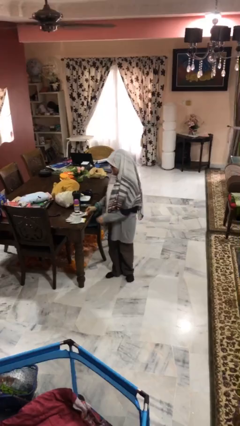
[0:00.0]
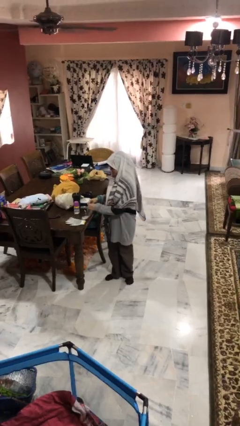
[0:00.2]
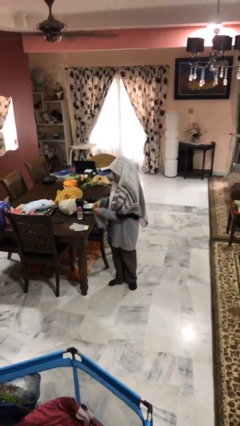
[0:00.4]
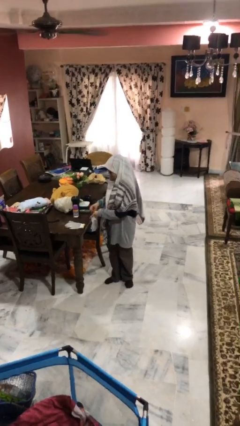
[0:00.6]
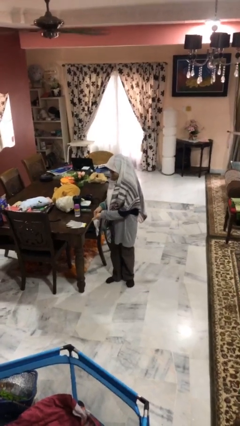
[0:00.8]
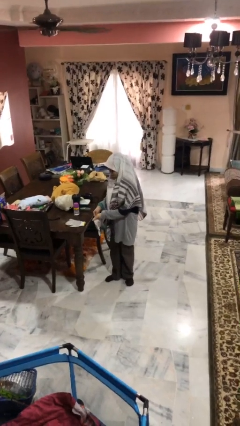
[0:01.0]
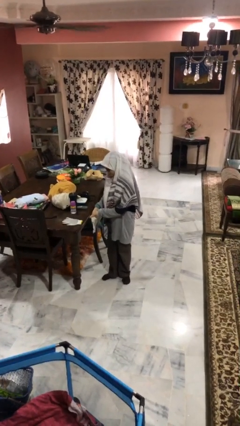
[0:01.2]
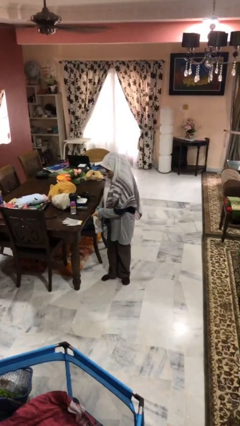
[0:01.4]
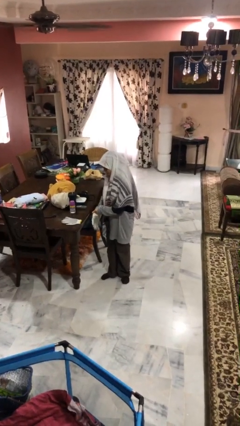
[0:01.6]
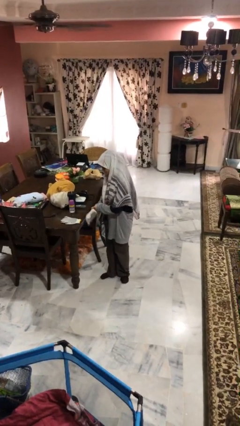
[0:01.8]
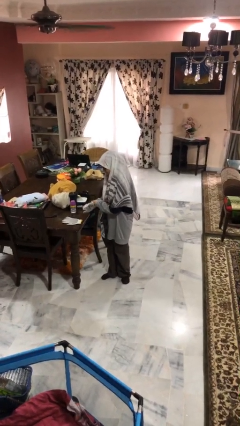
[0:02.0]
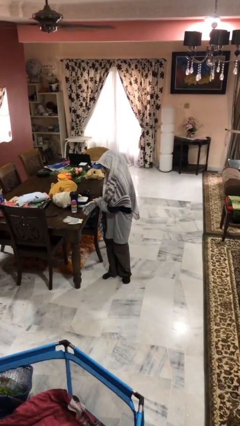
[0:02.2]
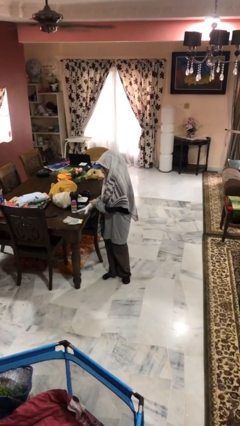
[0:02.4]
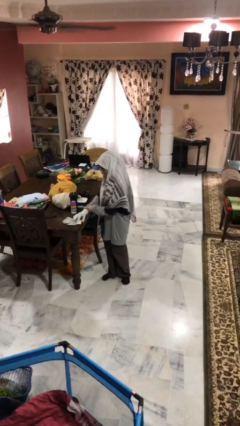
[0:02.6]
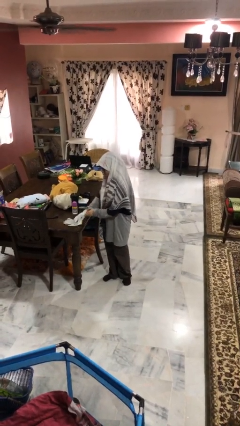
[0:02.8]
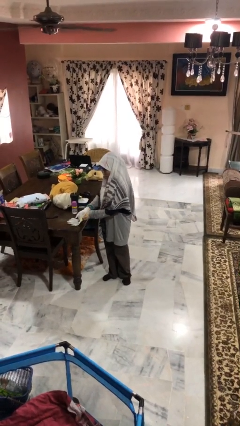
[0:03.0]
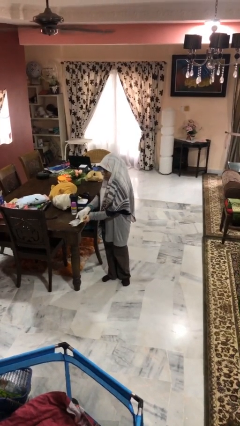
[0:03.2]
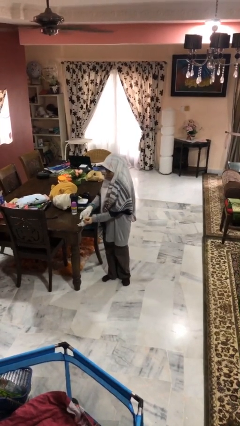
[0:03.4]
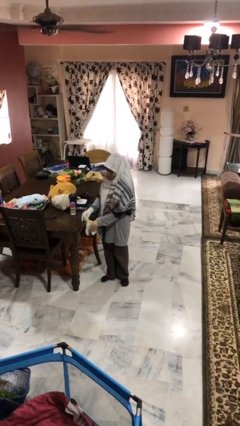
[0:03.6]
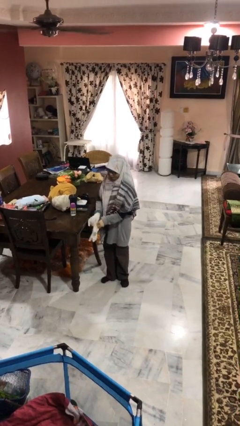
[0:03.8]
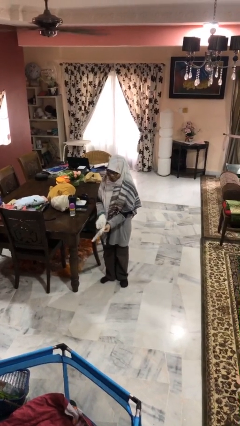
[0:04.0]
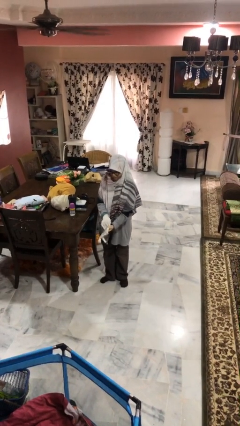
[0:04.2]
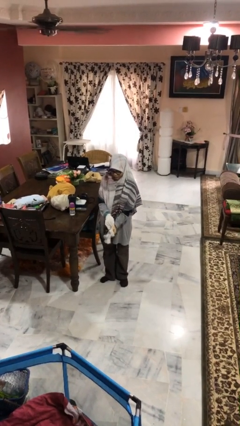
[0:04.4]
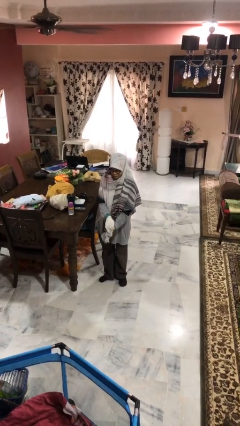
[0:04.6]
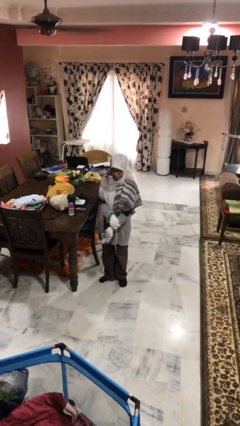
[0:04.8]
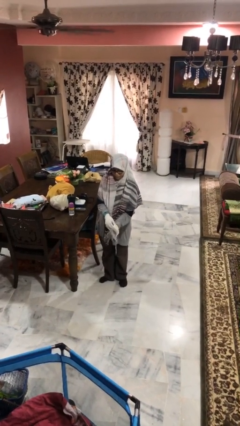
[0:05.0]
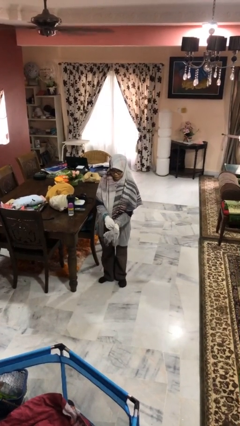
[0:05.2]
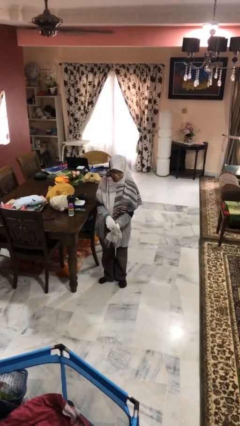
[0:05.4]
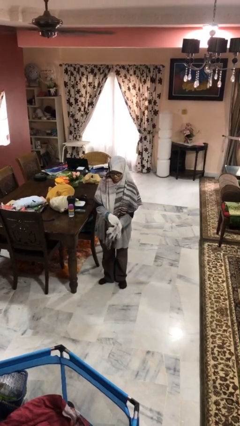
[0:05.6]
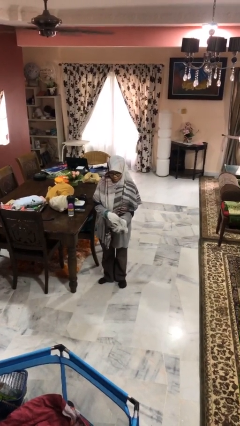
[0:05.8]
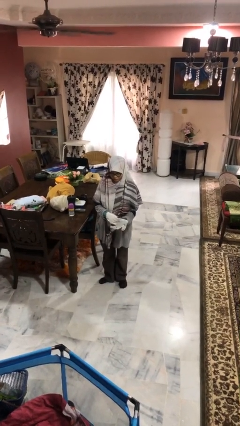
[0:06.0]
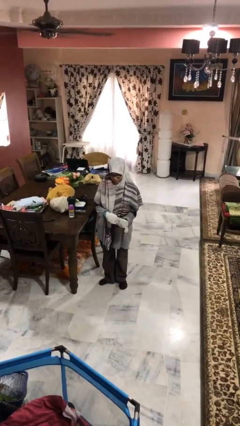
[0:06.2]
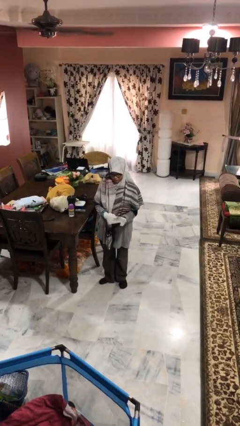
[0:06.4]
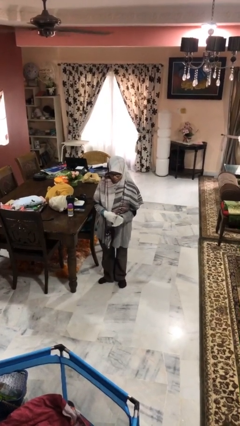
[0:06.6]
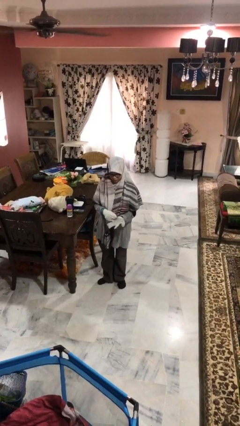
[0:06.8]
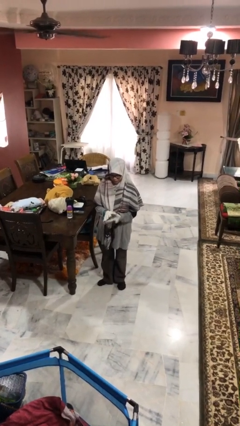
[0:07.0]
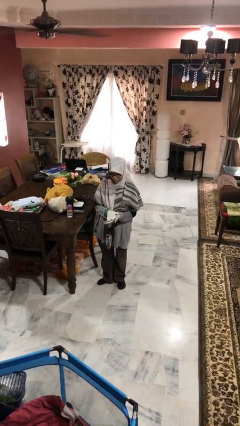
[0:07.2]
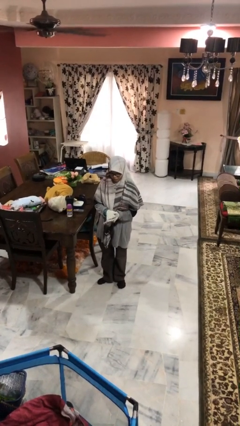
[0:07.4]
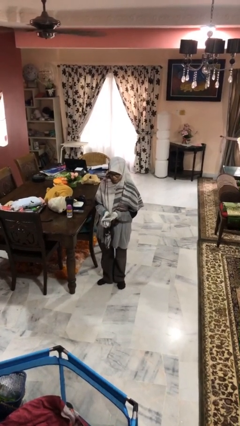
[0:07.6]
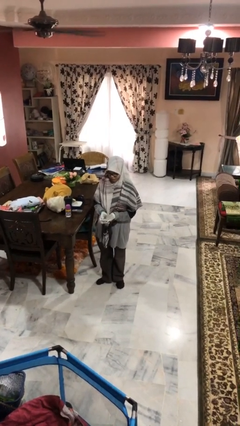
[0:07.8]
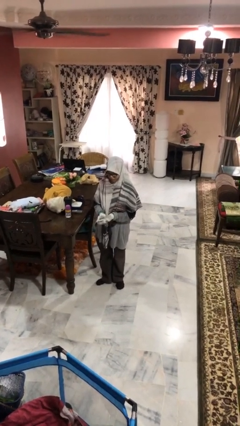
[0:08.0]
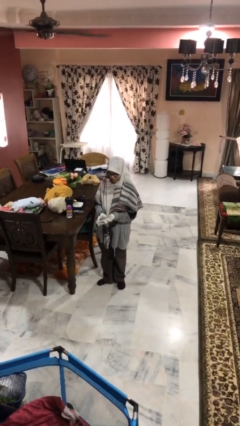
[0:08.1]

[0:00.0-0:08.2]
person puts on gloves

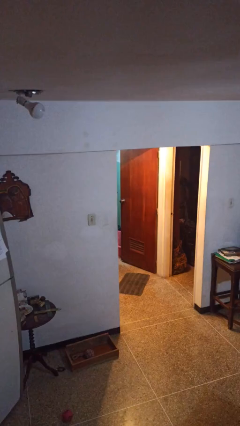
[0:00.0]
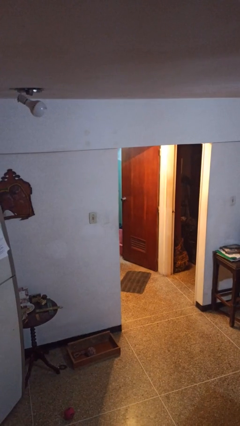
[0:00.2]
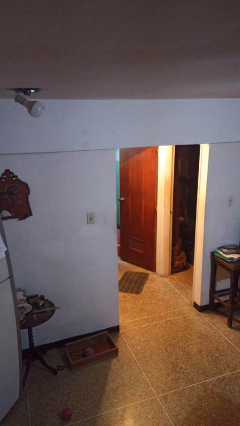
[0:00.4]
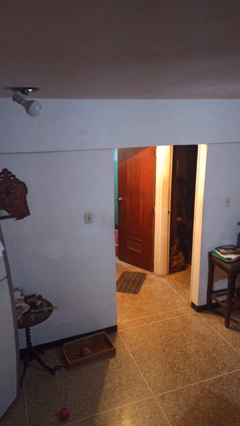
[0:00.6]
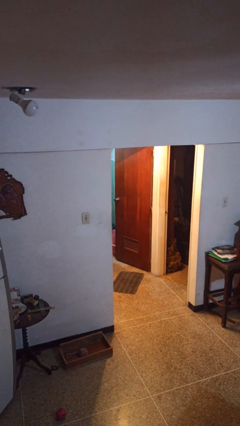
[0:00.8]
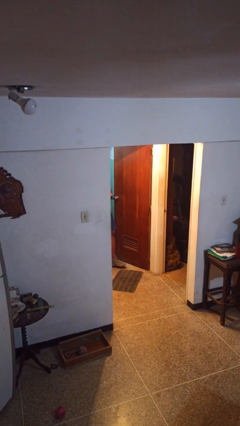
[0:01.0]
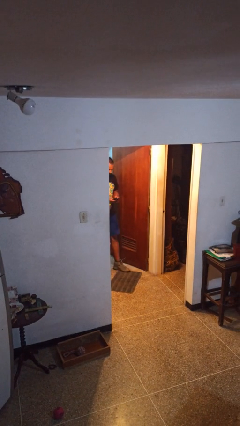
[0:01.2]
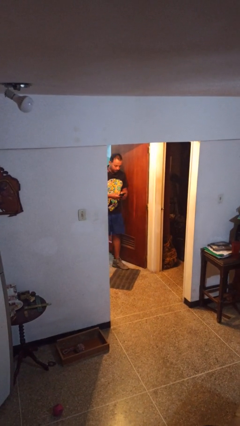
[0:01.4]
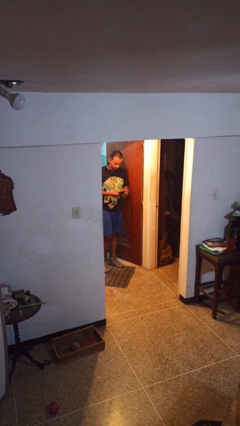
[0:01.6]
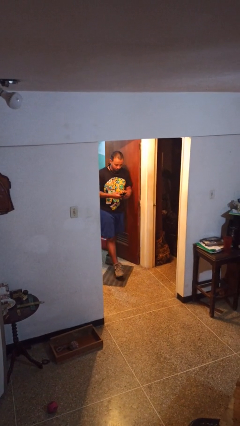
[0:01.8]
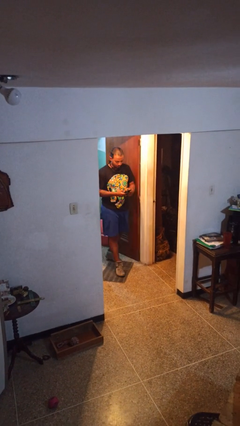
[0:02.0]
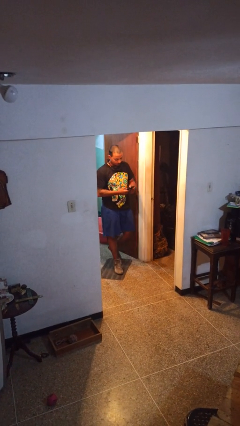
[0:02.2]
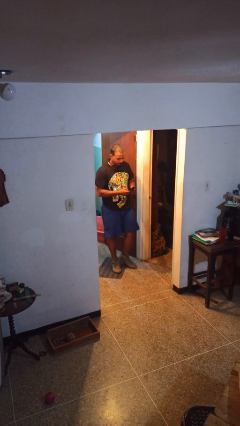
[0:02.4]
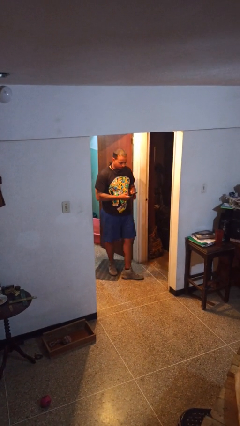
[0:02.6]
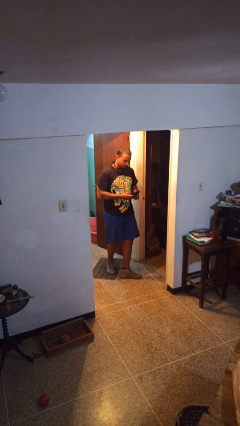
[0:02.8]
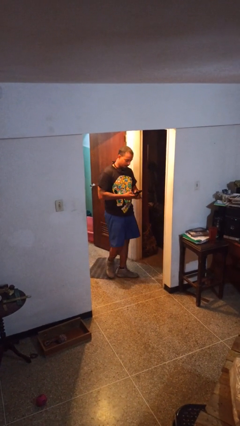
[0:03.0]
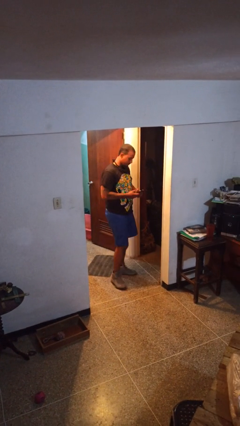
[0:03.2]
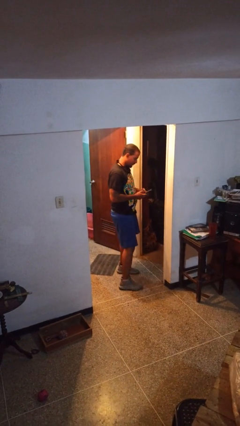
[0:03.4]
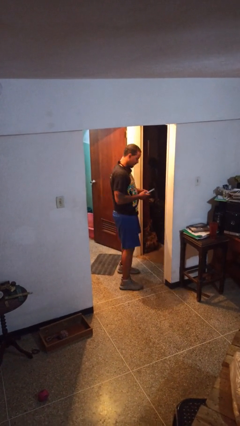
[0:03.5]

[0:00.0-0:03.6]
person enters scene through structure

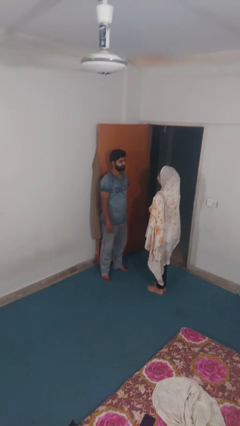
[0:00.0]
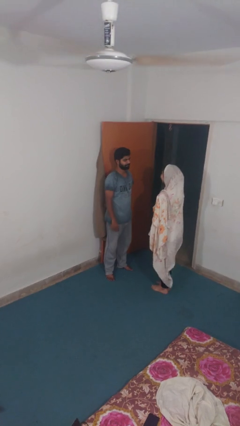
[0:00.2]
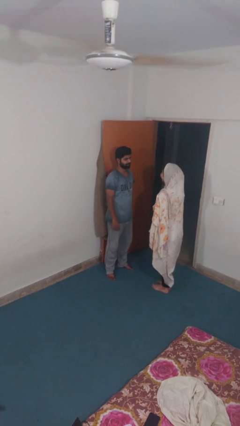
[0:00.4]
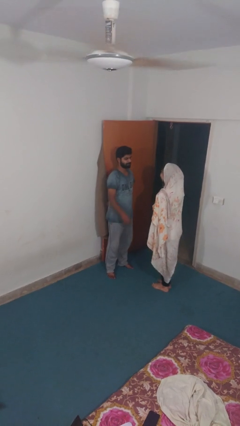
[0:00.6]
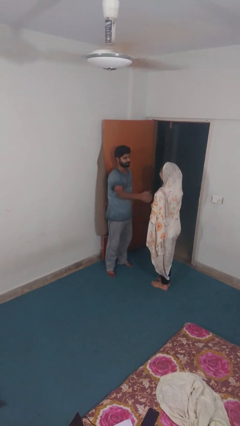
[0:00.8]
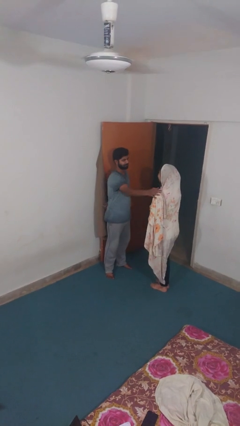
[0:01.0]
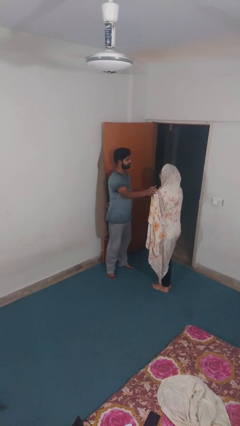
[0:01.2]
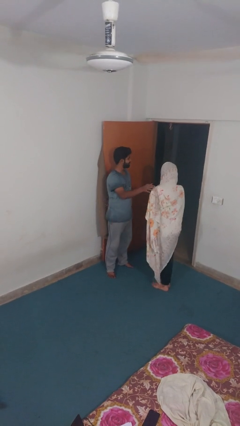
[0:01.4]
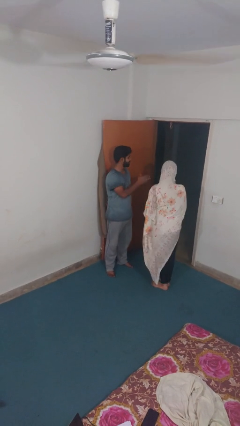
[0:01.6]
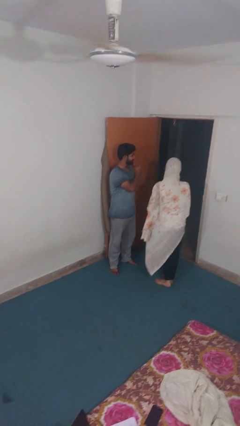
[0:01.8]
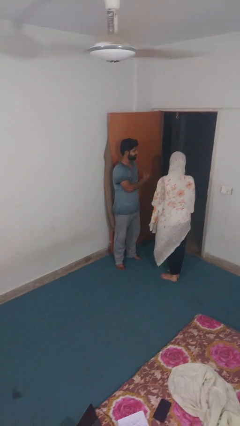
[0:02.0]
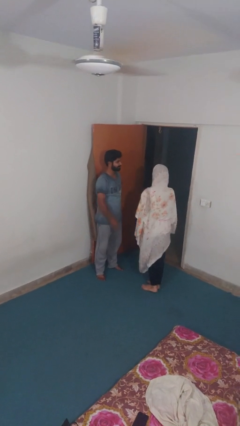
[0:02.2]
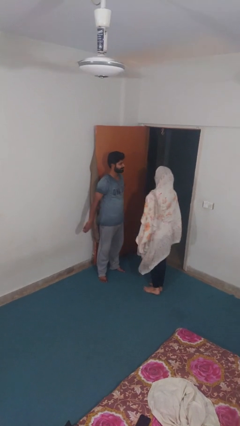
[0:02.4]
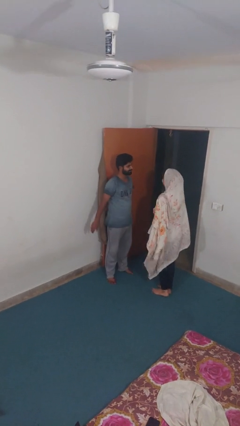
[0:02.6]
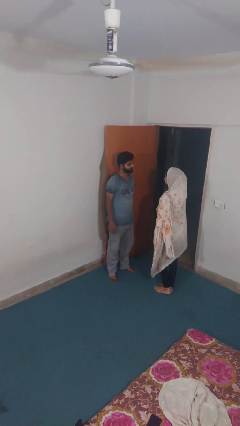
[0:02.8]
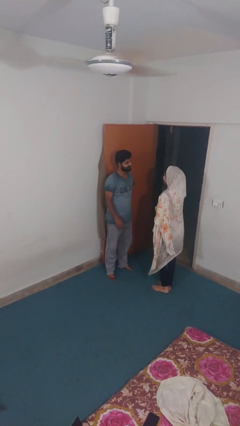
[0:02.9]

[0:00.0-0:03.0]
person shoves person

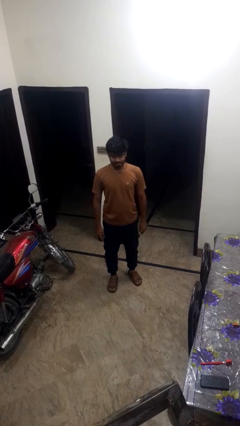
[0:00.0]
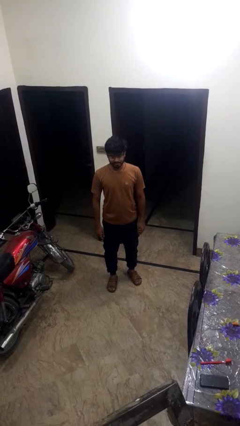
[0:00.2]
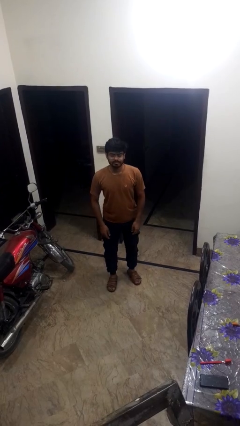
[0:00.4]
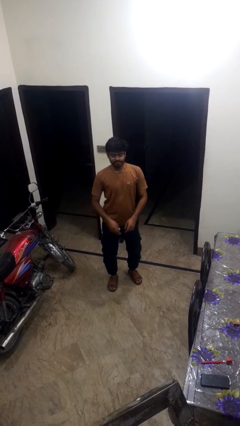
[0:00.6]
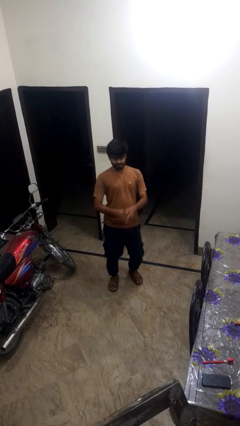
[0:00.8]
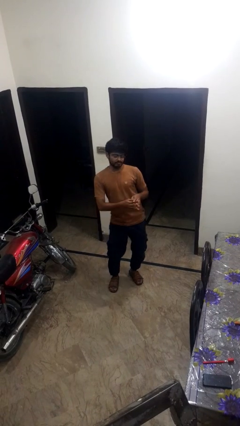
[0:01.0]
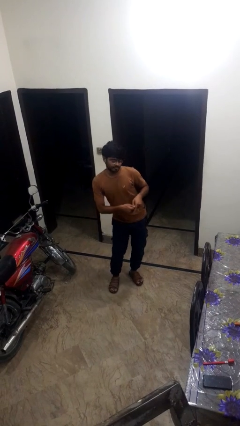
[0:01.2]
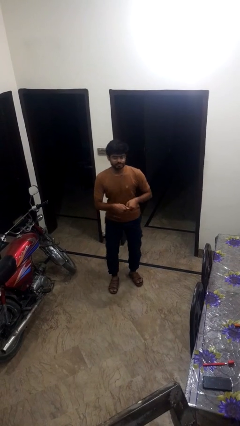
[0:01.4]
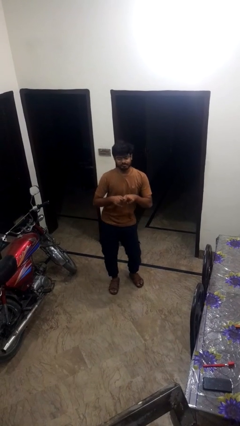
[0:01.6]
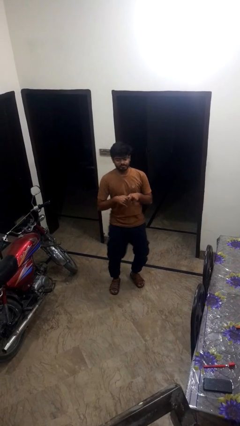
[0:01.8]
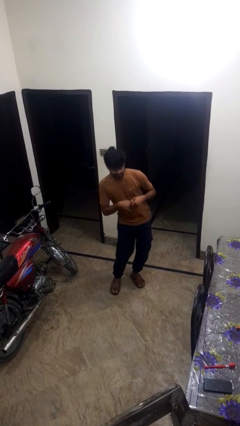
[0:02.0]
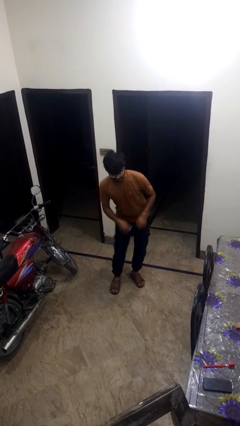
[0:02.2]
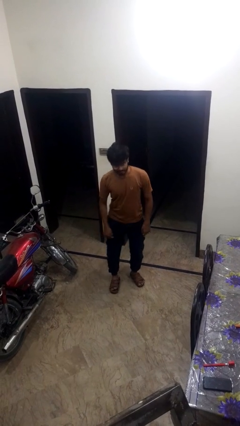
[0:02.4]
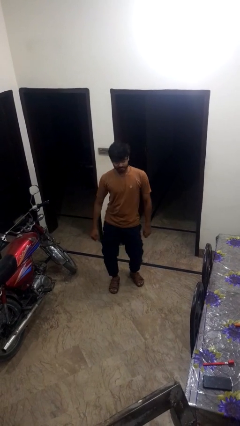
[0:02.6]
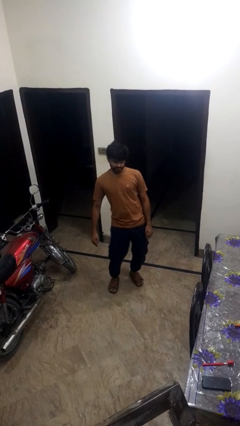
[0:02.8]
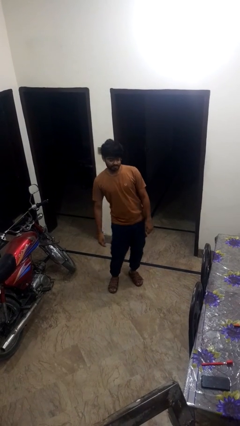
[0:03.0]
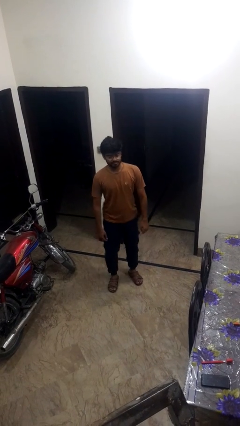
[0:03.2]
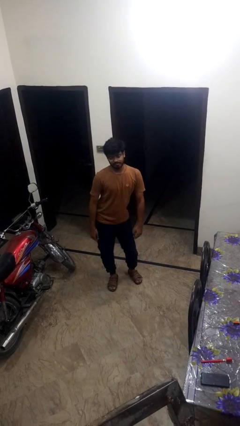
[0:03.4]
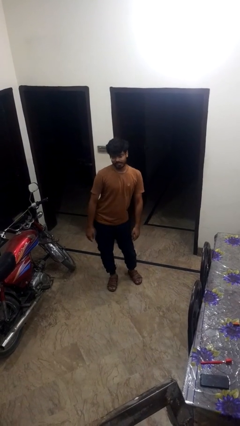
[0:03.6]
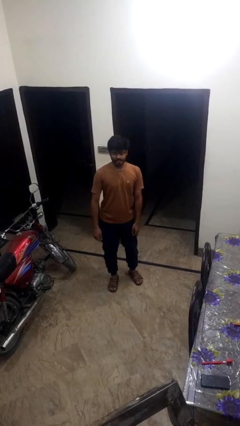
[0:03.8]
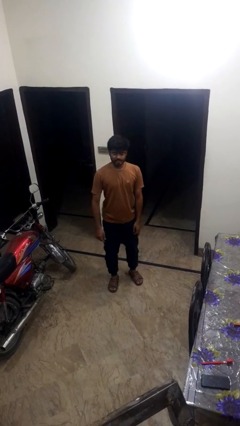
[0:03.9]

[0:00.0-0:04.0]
person wiggles hips
